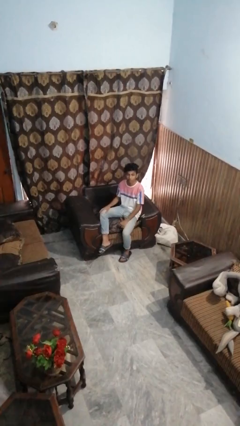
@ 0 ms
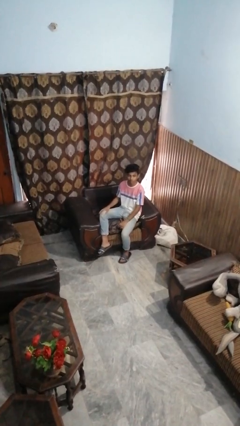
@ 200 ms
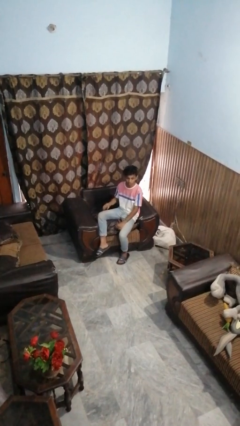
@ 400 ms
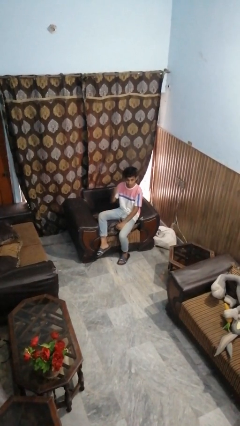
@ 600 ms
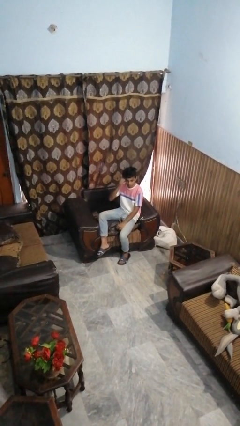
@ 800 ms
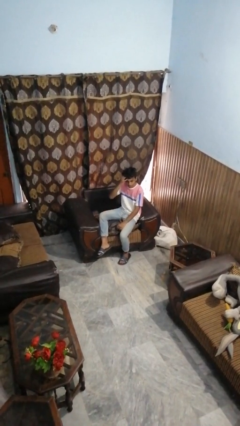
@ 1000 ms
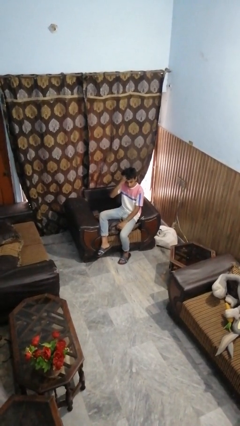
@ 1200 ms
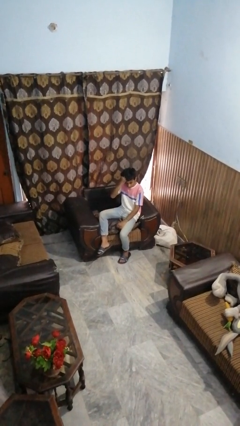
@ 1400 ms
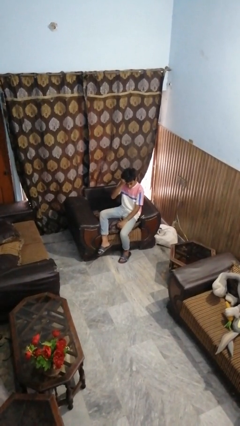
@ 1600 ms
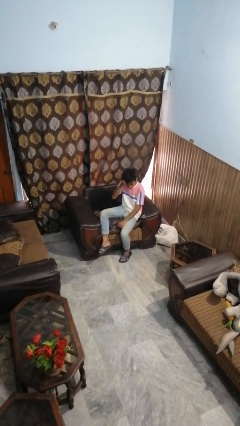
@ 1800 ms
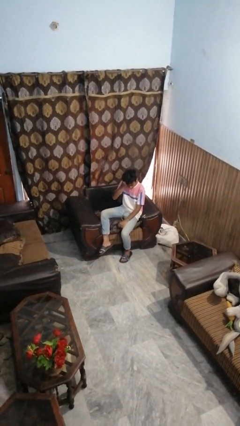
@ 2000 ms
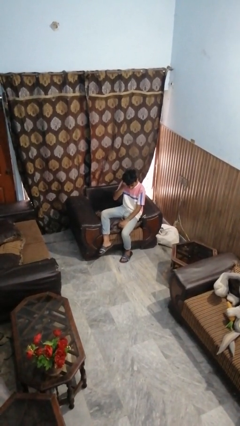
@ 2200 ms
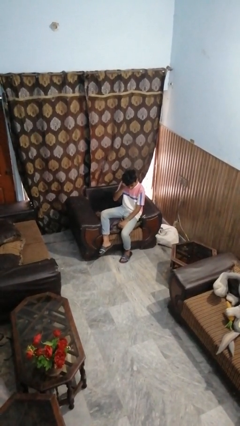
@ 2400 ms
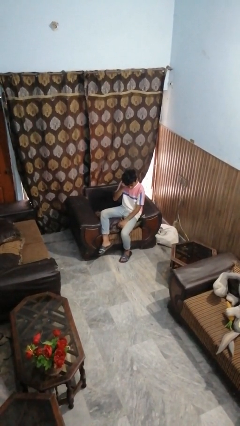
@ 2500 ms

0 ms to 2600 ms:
person strokes hair

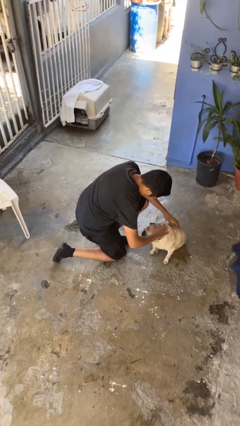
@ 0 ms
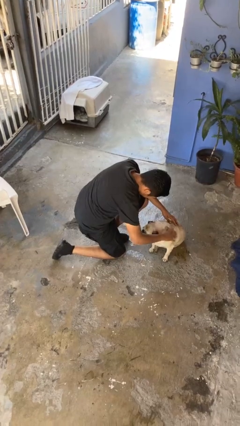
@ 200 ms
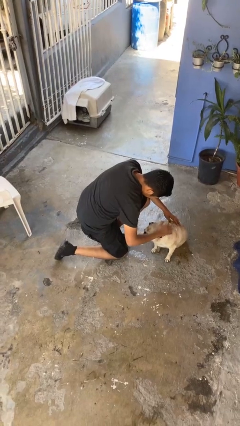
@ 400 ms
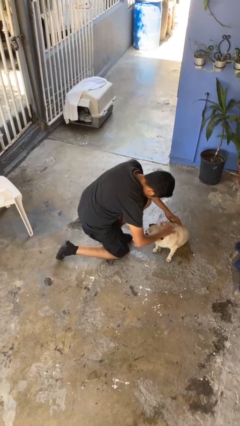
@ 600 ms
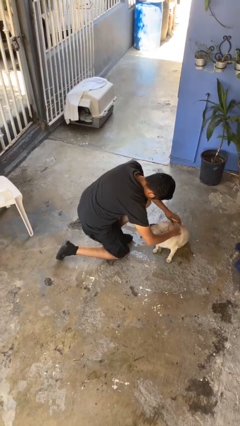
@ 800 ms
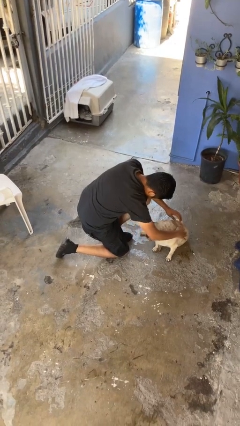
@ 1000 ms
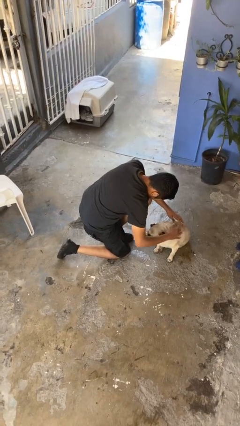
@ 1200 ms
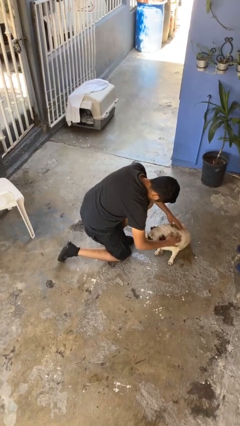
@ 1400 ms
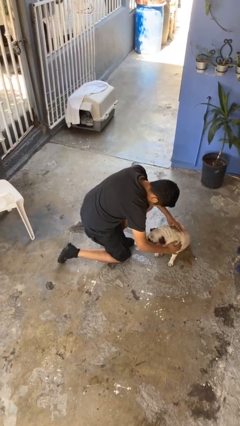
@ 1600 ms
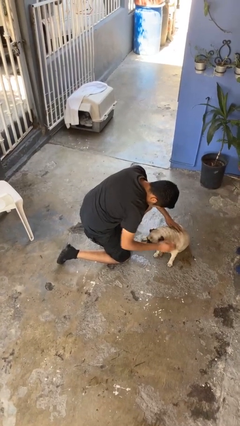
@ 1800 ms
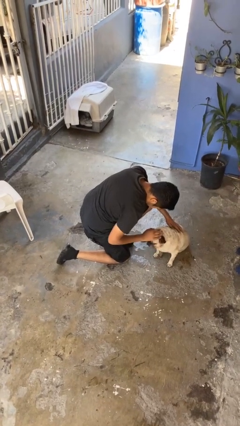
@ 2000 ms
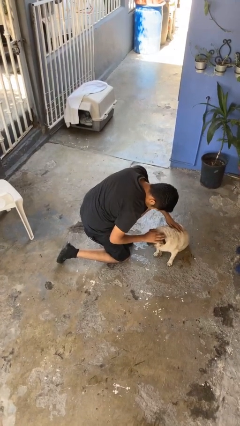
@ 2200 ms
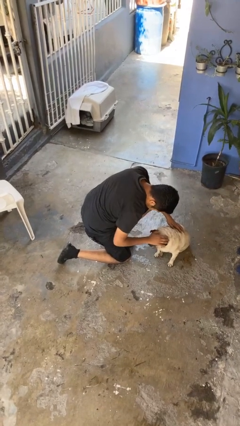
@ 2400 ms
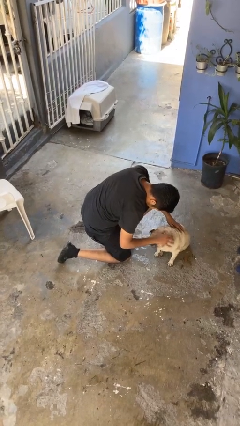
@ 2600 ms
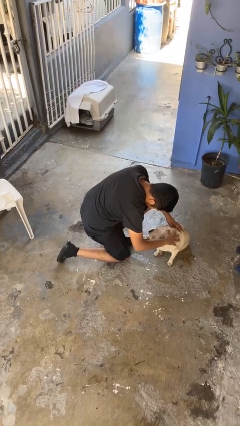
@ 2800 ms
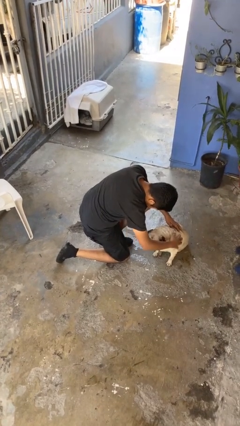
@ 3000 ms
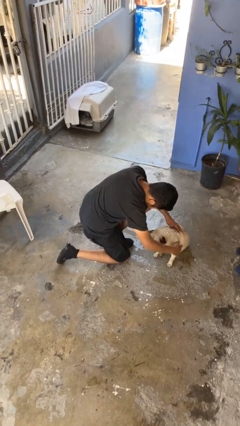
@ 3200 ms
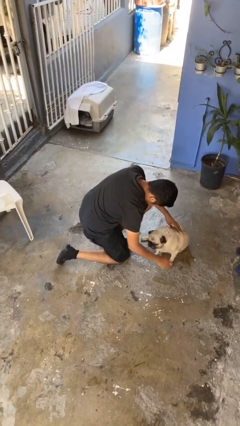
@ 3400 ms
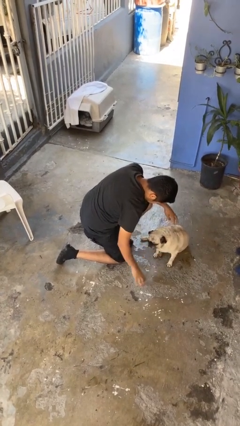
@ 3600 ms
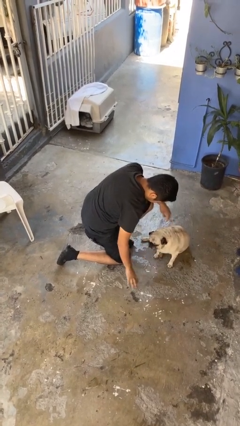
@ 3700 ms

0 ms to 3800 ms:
person pets dog

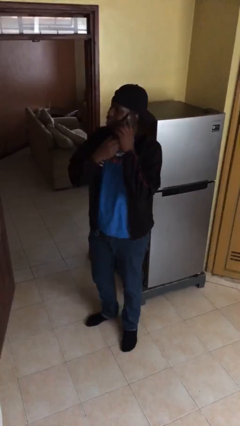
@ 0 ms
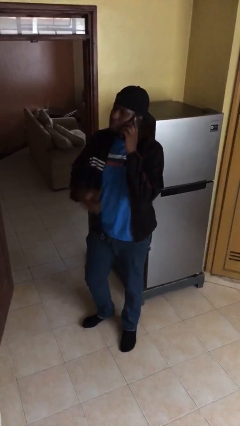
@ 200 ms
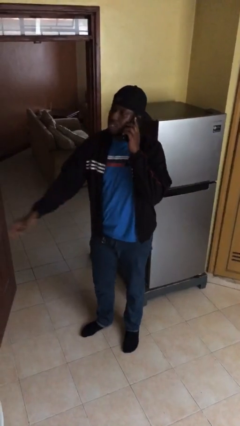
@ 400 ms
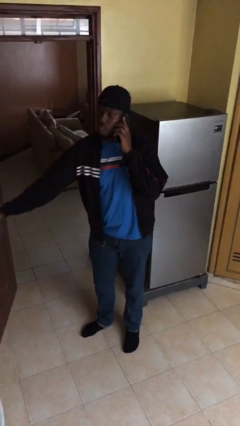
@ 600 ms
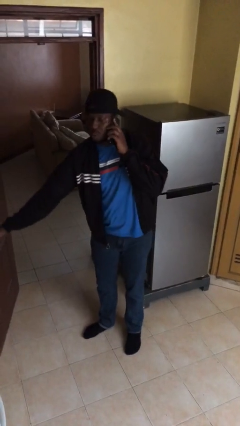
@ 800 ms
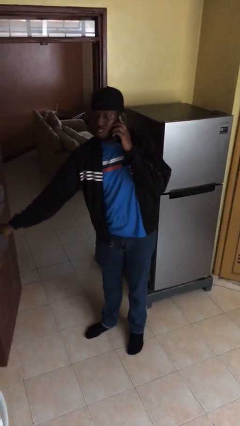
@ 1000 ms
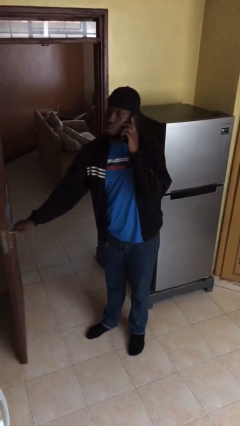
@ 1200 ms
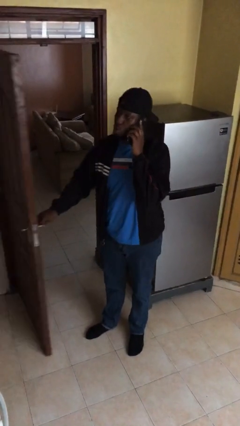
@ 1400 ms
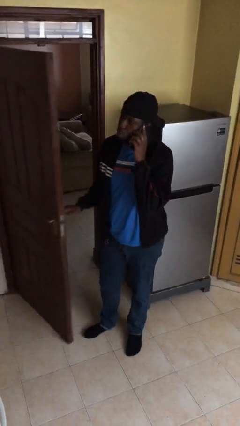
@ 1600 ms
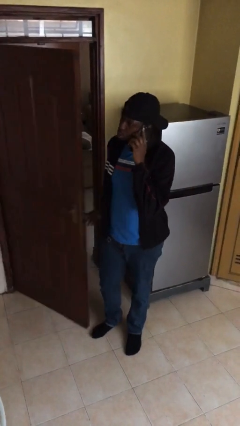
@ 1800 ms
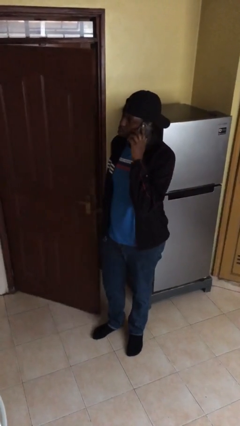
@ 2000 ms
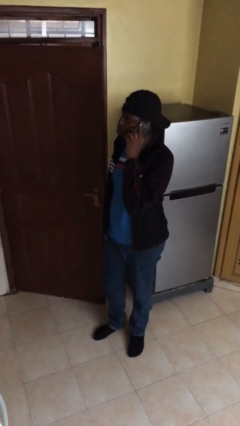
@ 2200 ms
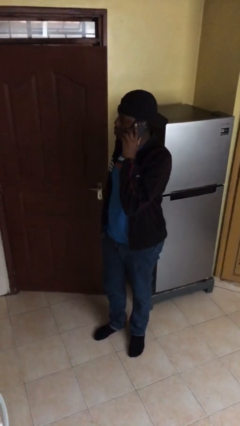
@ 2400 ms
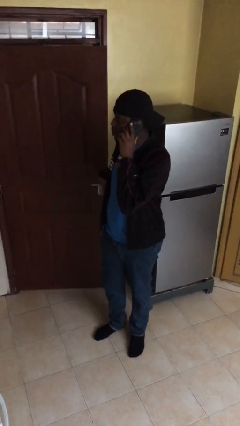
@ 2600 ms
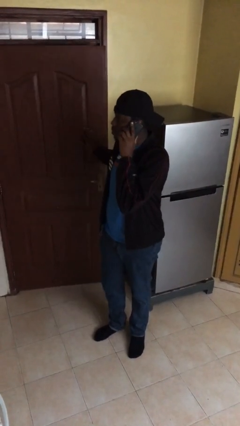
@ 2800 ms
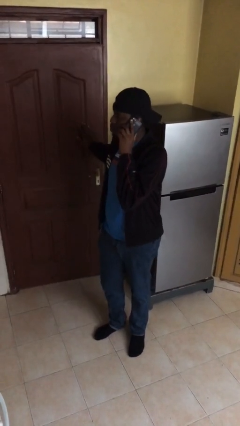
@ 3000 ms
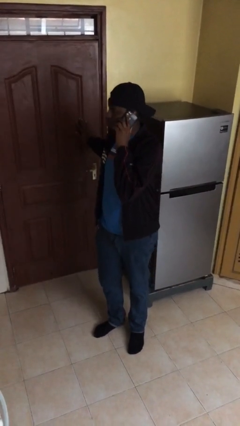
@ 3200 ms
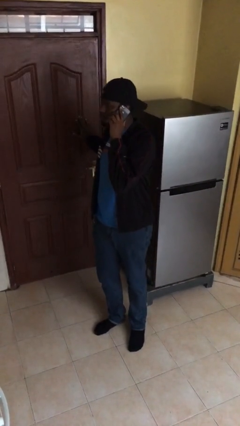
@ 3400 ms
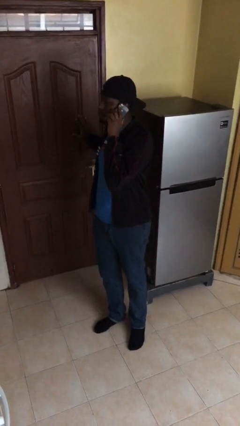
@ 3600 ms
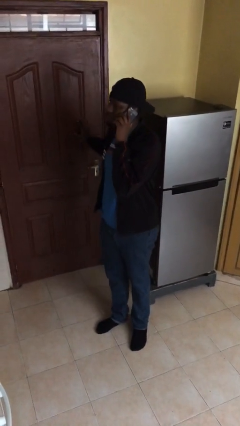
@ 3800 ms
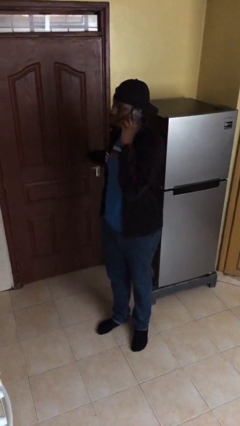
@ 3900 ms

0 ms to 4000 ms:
person closes facility door

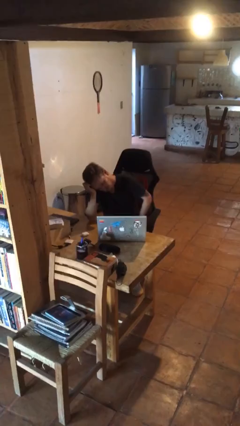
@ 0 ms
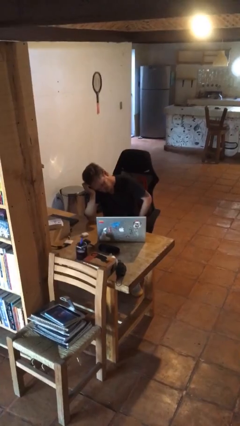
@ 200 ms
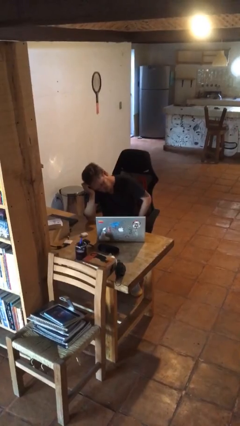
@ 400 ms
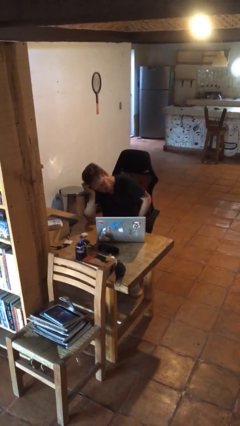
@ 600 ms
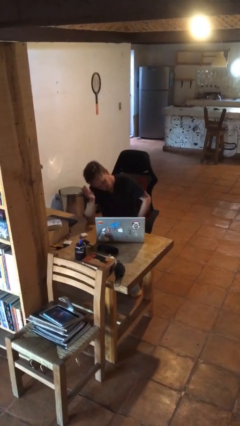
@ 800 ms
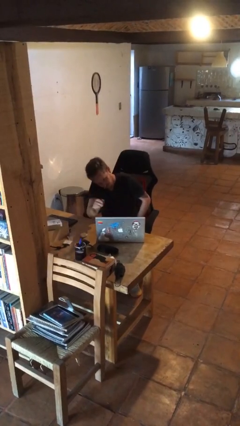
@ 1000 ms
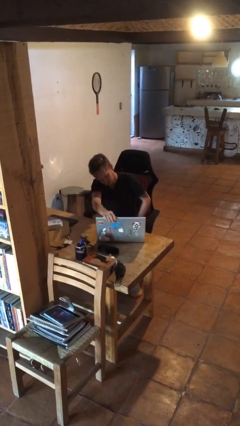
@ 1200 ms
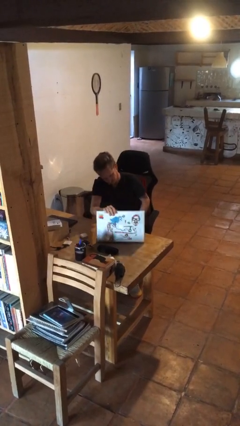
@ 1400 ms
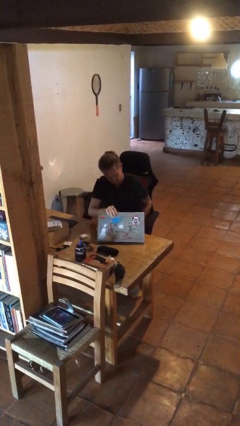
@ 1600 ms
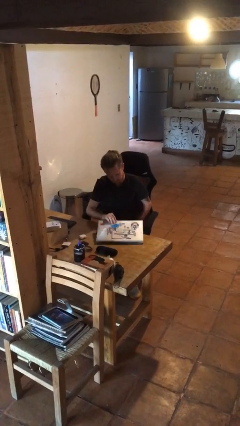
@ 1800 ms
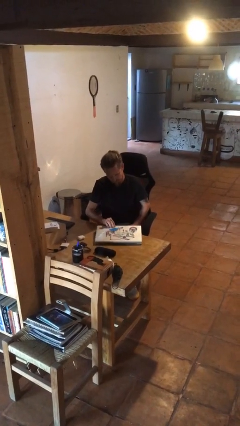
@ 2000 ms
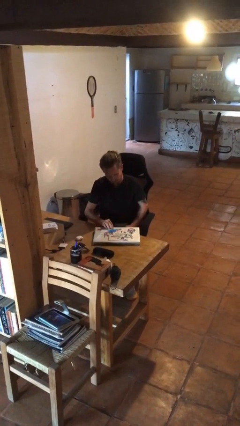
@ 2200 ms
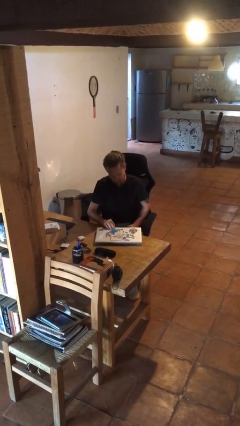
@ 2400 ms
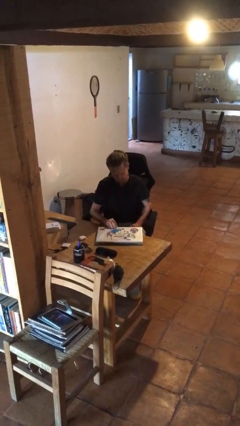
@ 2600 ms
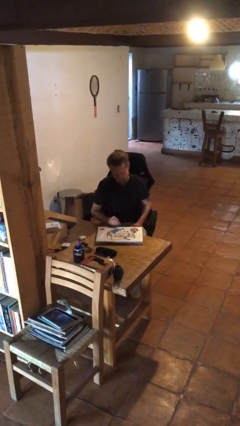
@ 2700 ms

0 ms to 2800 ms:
person closes laptop

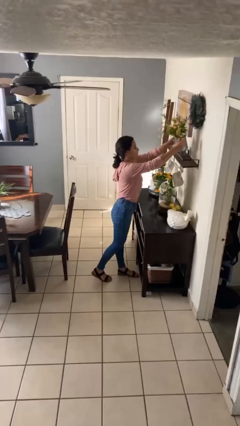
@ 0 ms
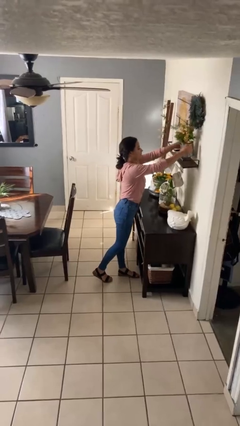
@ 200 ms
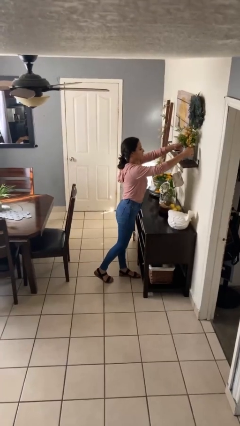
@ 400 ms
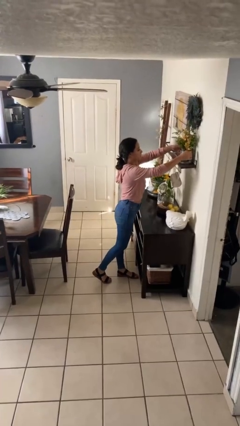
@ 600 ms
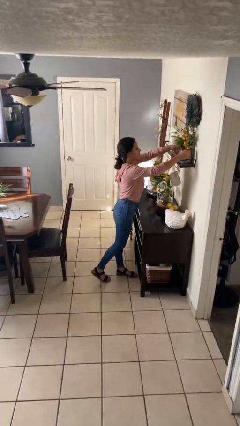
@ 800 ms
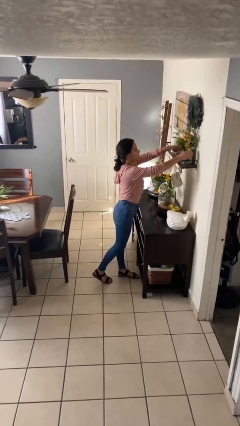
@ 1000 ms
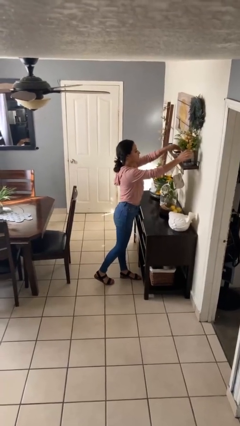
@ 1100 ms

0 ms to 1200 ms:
person puts down object on countertop

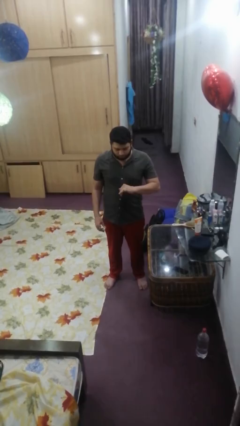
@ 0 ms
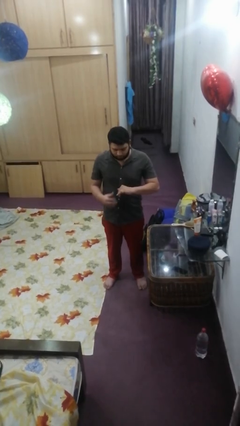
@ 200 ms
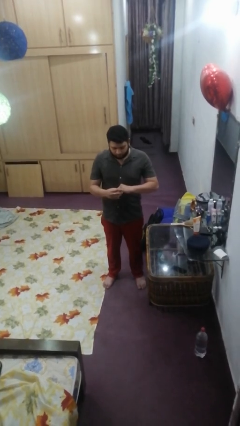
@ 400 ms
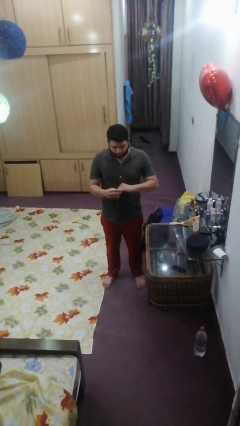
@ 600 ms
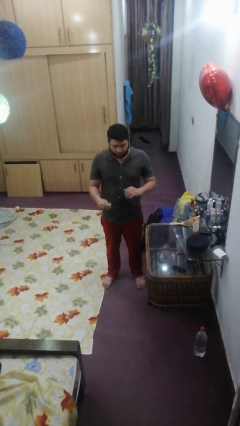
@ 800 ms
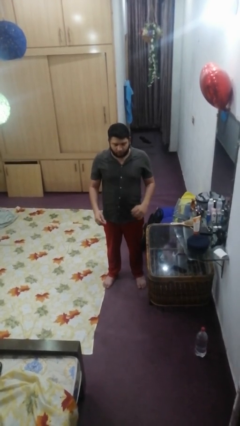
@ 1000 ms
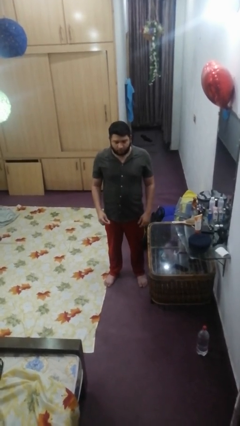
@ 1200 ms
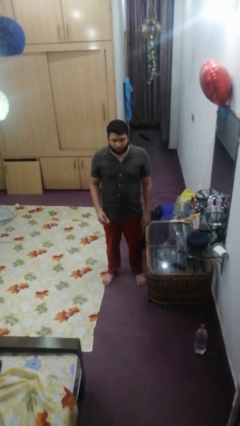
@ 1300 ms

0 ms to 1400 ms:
person takes off ring

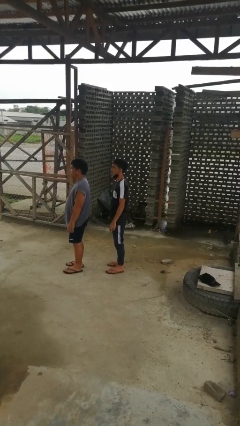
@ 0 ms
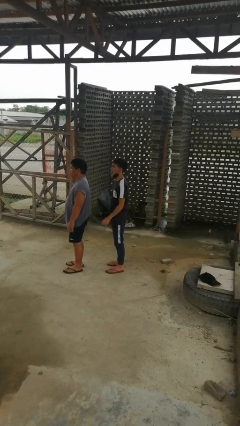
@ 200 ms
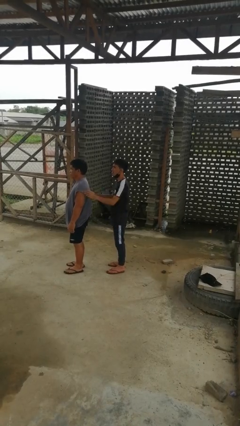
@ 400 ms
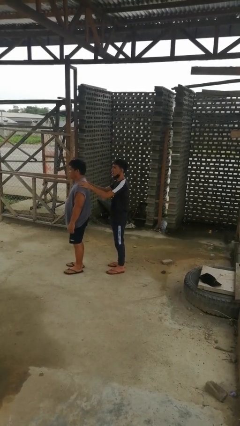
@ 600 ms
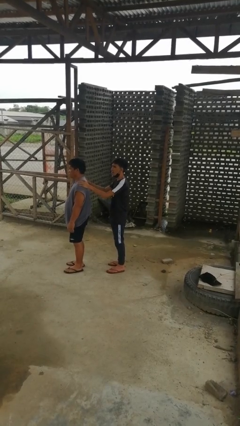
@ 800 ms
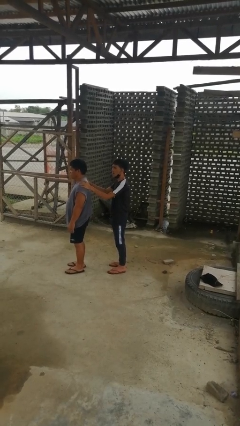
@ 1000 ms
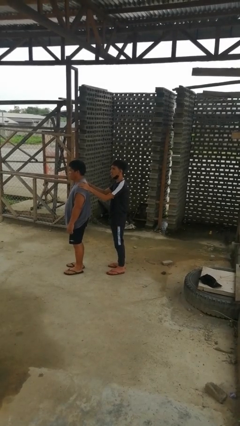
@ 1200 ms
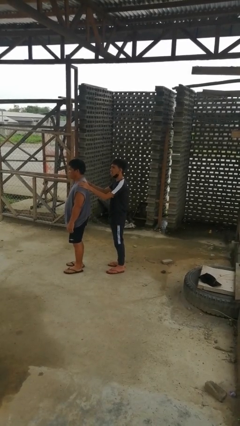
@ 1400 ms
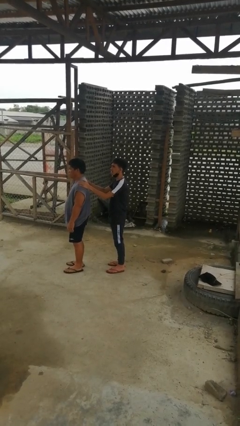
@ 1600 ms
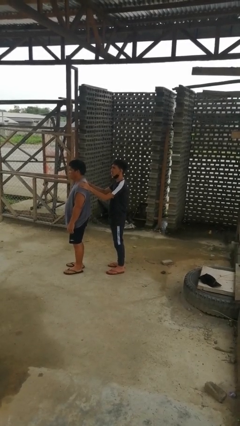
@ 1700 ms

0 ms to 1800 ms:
person grabs person by shoulder
